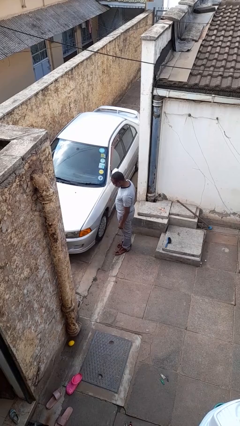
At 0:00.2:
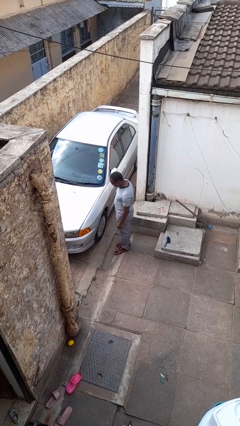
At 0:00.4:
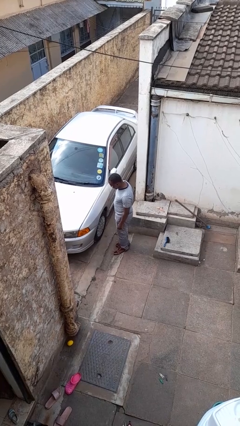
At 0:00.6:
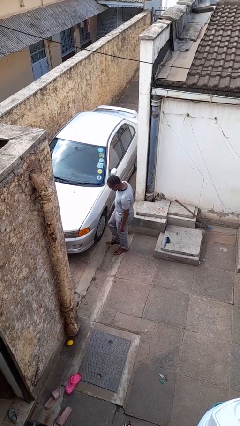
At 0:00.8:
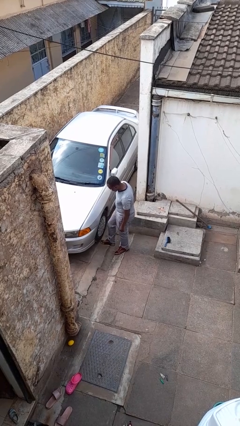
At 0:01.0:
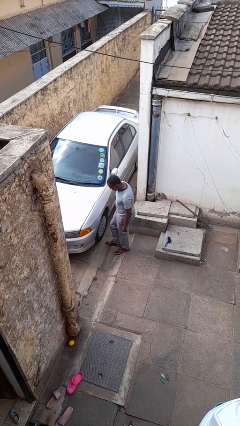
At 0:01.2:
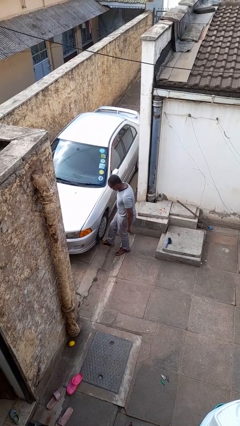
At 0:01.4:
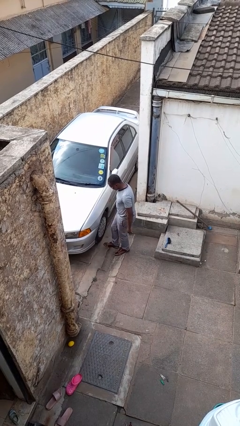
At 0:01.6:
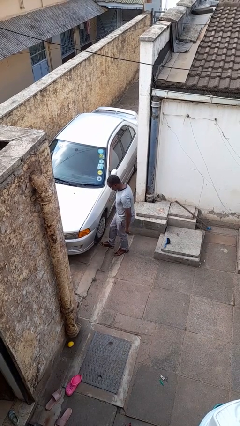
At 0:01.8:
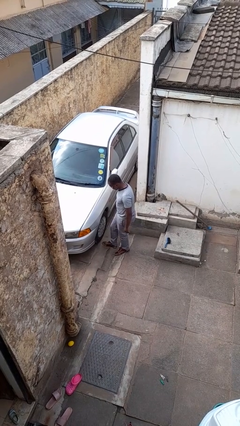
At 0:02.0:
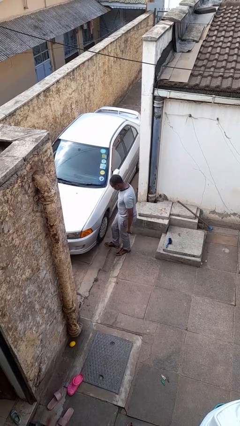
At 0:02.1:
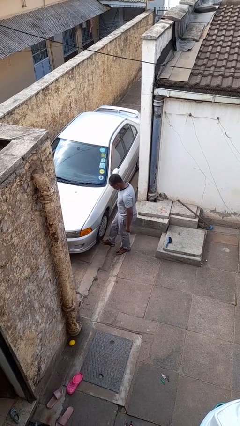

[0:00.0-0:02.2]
person kicks car tires

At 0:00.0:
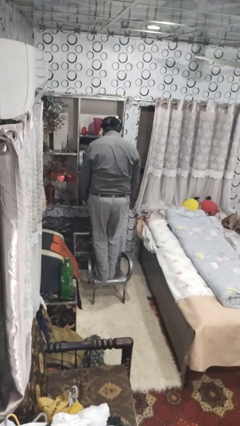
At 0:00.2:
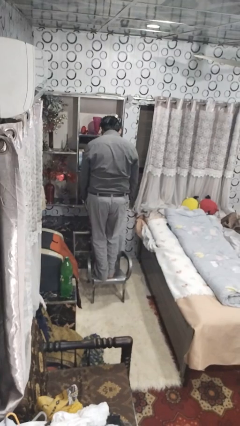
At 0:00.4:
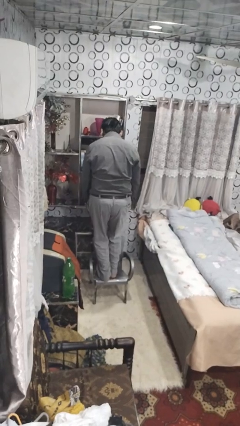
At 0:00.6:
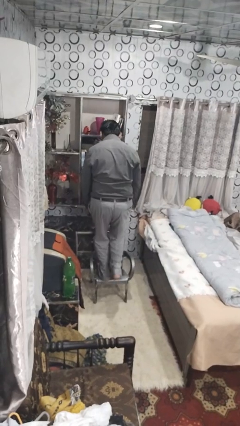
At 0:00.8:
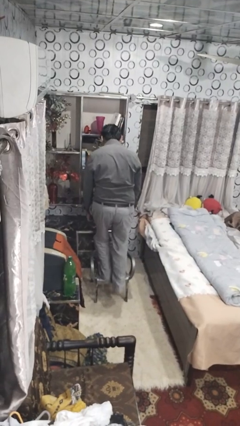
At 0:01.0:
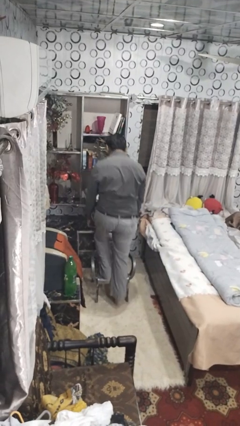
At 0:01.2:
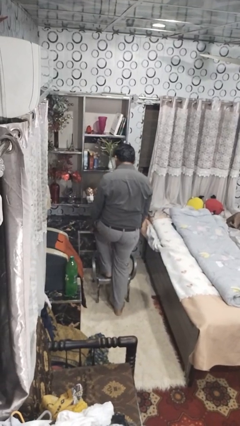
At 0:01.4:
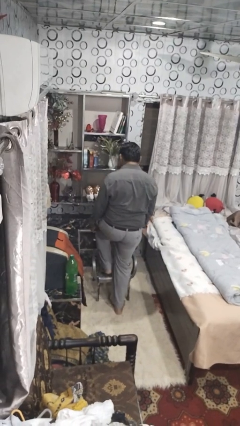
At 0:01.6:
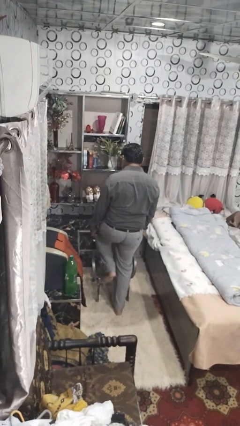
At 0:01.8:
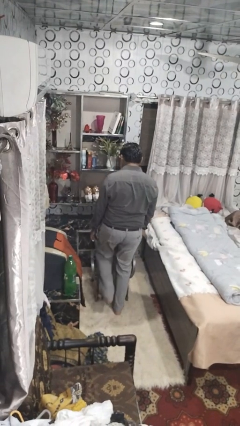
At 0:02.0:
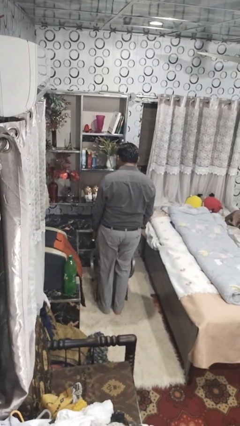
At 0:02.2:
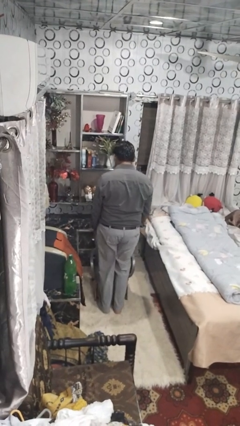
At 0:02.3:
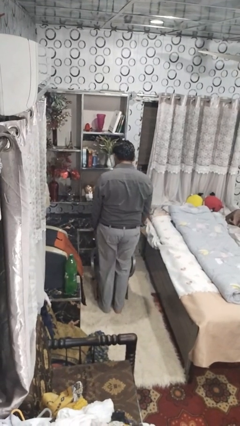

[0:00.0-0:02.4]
person climbs off chair

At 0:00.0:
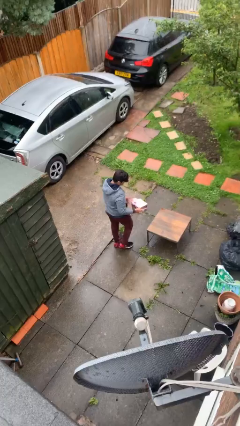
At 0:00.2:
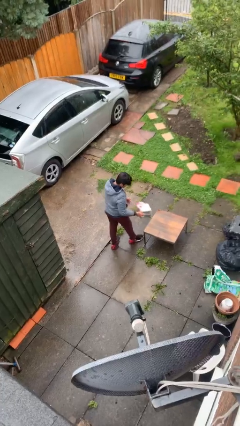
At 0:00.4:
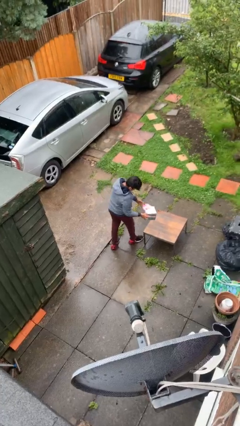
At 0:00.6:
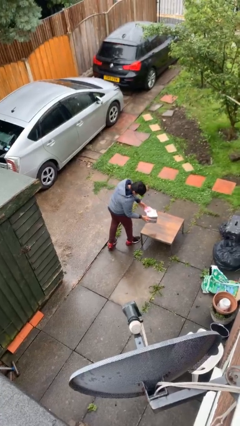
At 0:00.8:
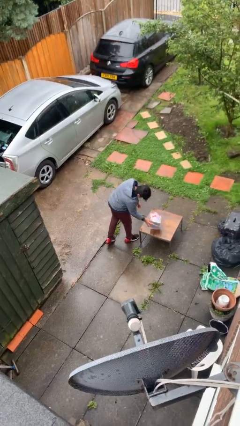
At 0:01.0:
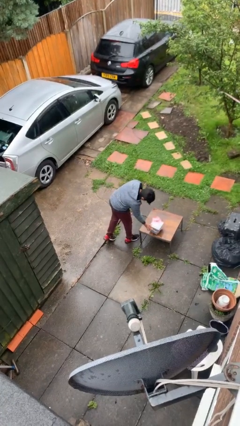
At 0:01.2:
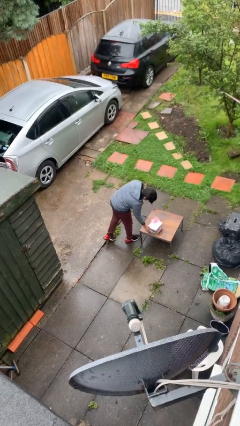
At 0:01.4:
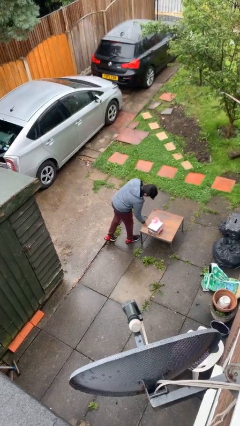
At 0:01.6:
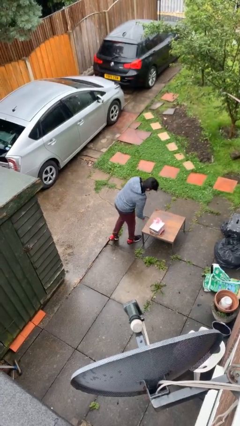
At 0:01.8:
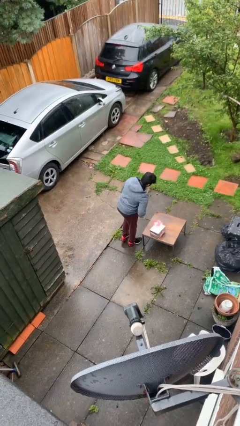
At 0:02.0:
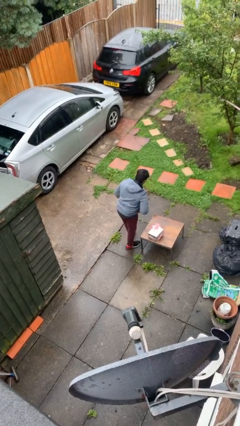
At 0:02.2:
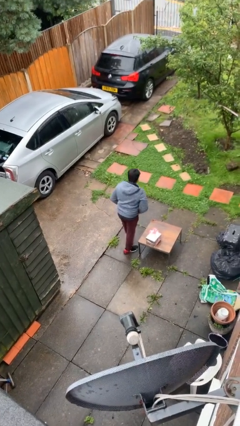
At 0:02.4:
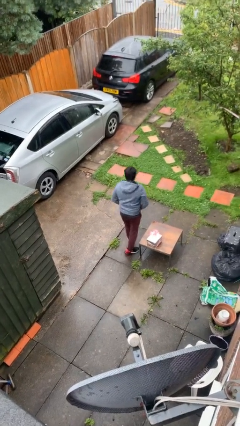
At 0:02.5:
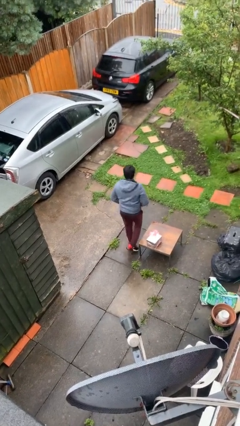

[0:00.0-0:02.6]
person puts down object on table

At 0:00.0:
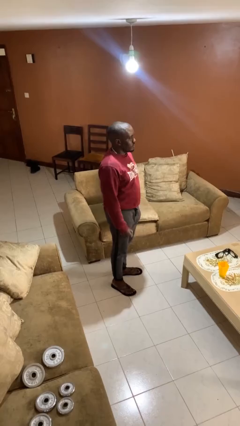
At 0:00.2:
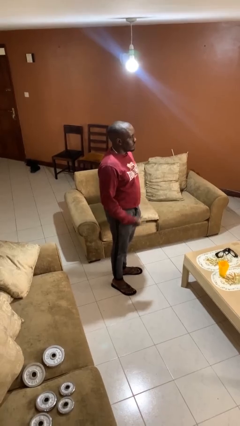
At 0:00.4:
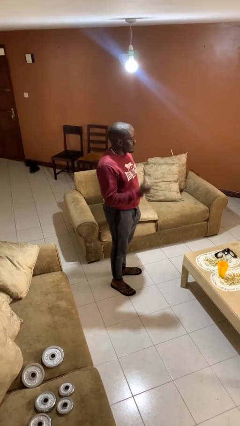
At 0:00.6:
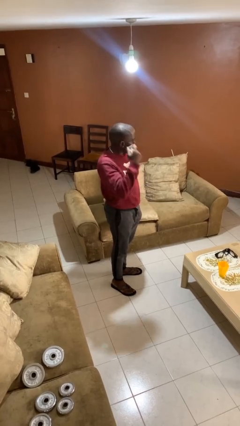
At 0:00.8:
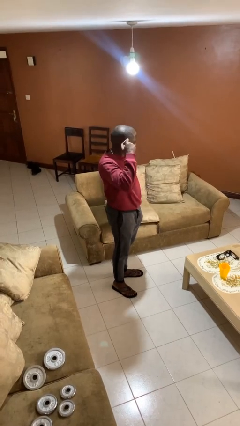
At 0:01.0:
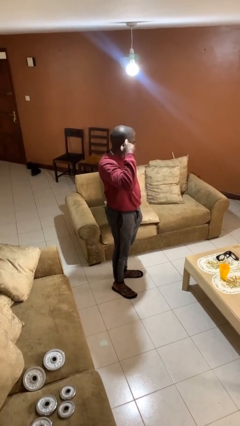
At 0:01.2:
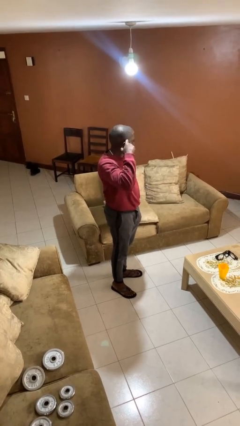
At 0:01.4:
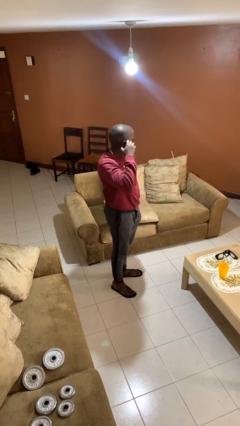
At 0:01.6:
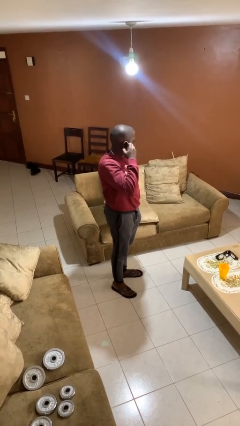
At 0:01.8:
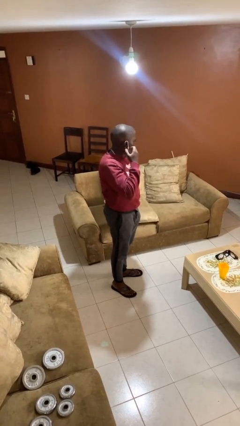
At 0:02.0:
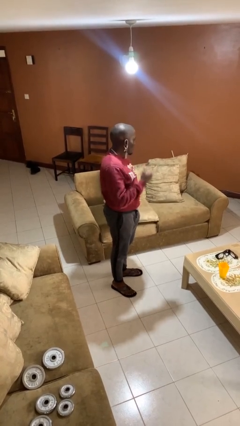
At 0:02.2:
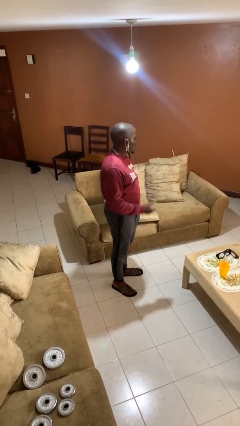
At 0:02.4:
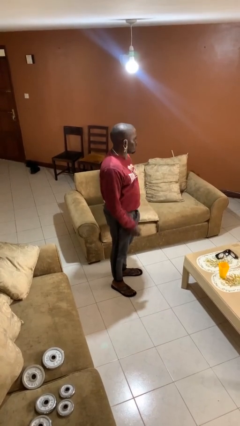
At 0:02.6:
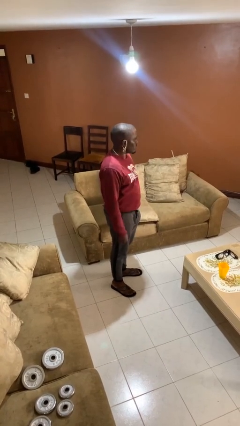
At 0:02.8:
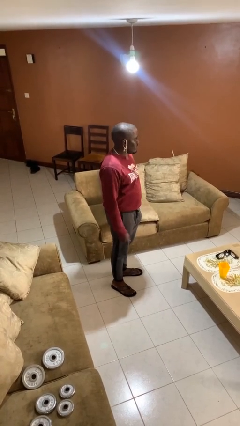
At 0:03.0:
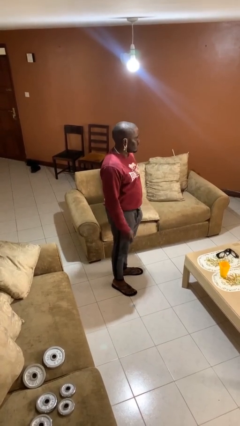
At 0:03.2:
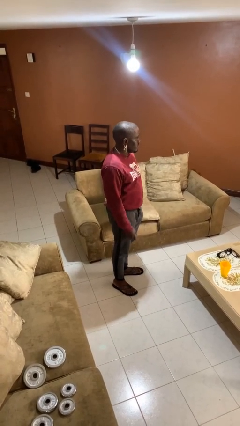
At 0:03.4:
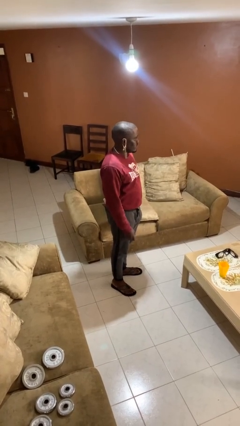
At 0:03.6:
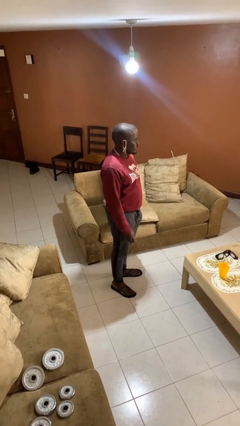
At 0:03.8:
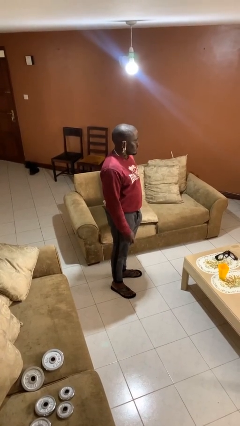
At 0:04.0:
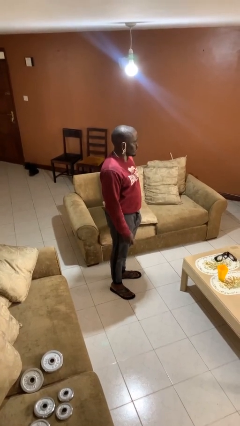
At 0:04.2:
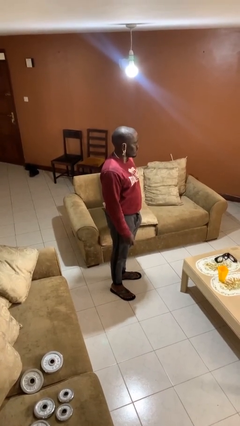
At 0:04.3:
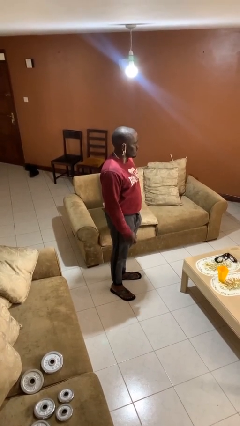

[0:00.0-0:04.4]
person puts on earrings

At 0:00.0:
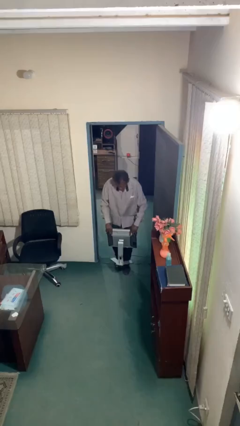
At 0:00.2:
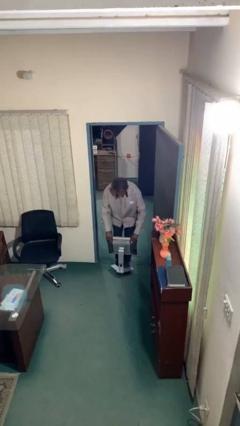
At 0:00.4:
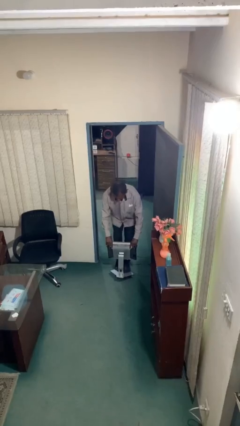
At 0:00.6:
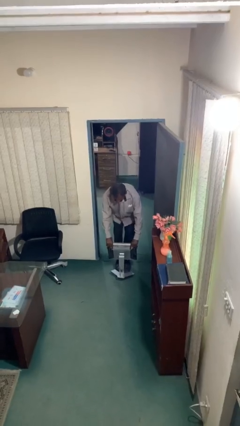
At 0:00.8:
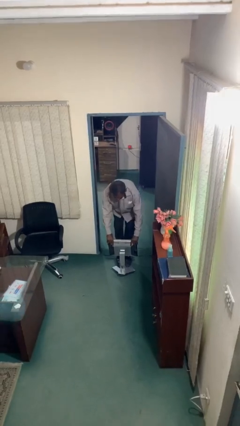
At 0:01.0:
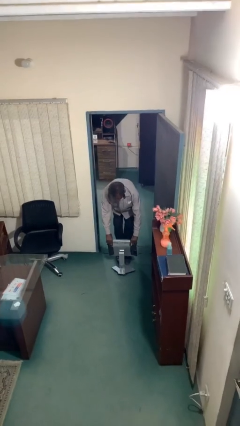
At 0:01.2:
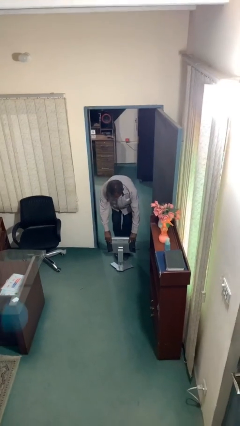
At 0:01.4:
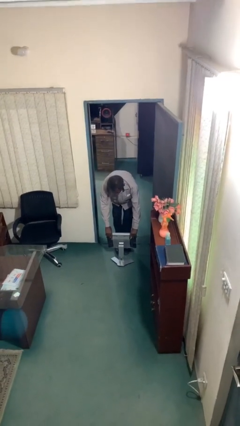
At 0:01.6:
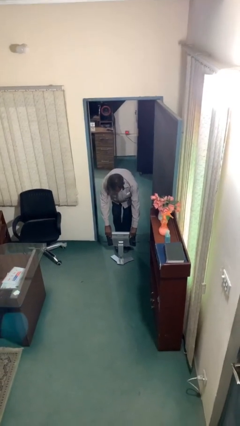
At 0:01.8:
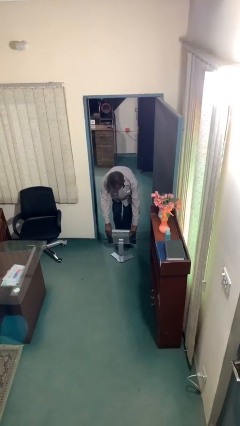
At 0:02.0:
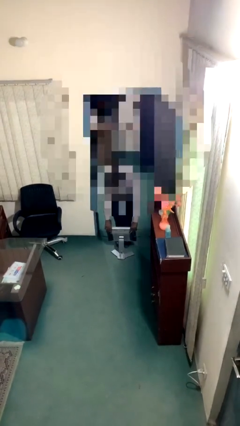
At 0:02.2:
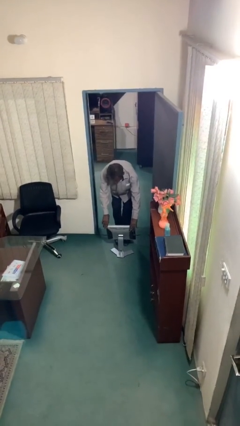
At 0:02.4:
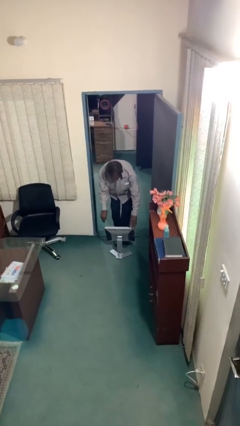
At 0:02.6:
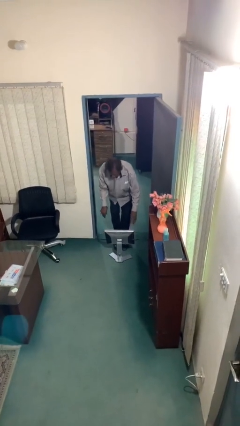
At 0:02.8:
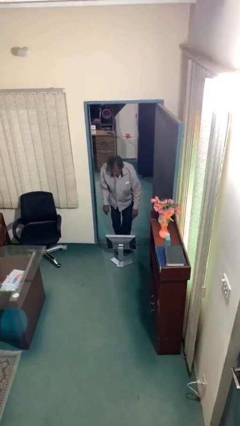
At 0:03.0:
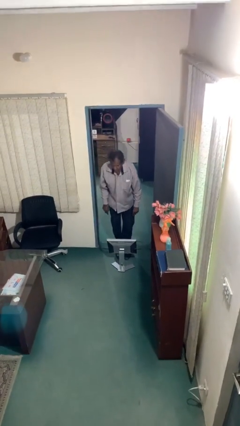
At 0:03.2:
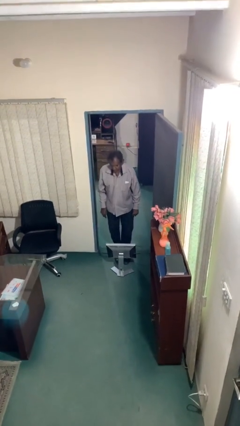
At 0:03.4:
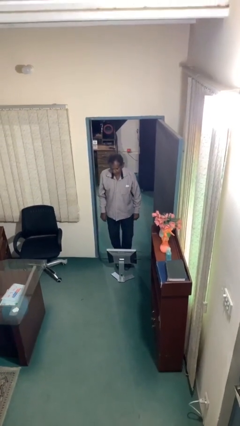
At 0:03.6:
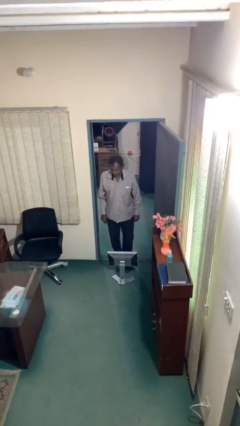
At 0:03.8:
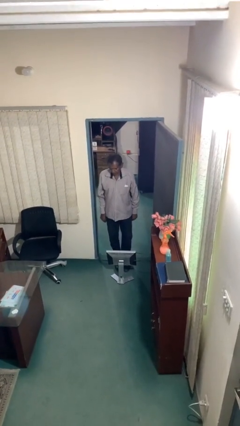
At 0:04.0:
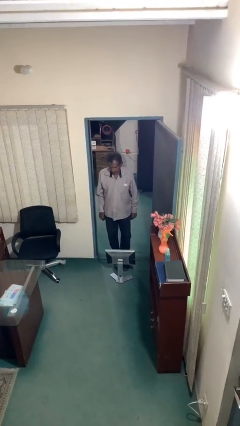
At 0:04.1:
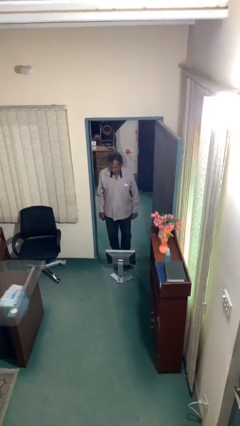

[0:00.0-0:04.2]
person puts down object on floor

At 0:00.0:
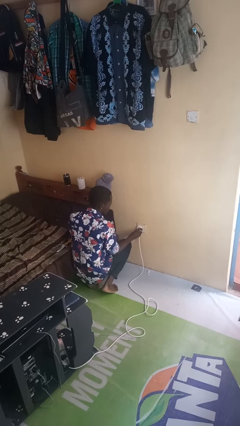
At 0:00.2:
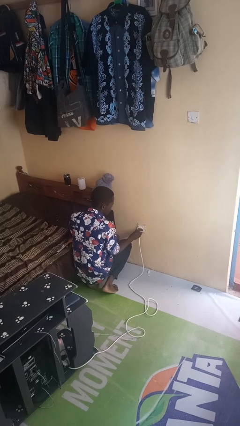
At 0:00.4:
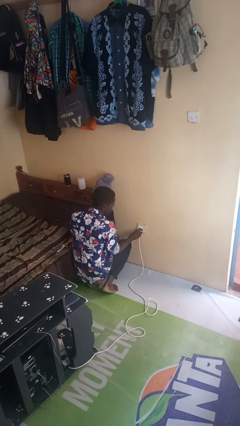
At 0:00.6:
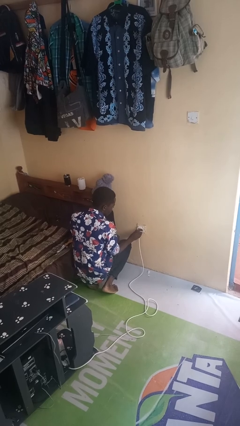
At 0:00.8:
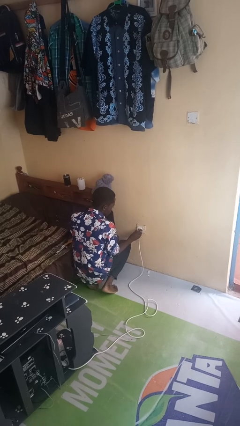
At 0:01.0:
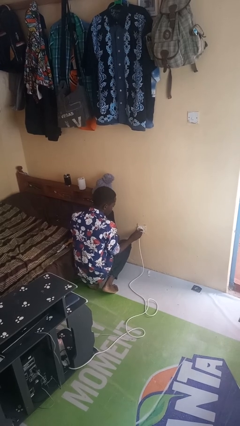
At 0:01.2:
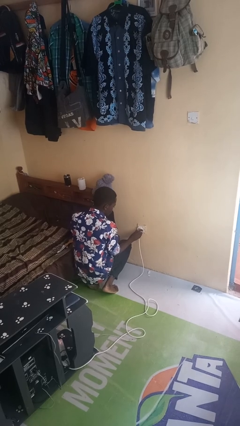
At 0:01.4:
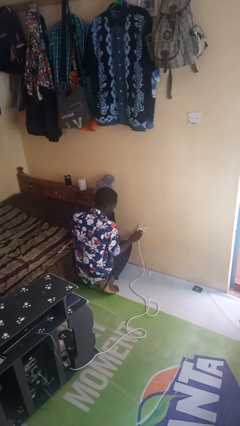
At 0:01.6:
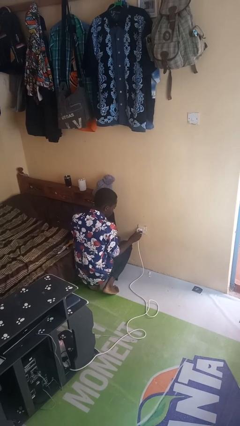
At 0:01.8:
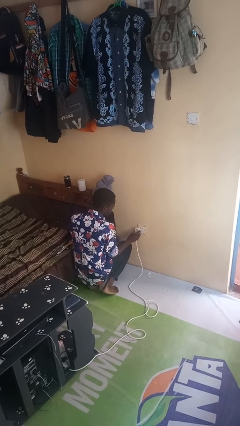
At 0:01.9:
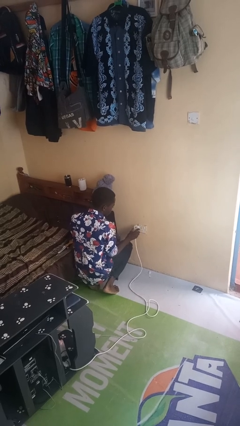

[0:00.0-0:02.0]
person unplugs from electrical socket
